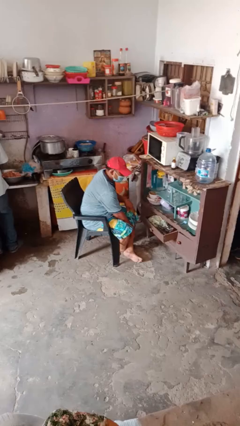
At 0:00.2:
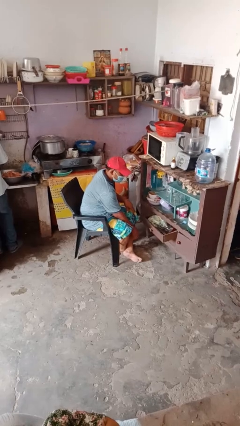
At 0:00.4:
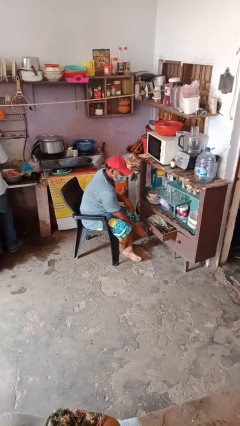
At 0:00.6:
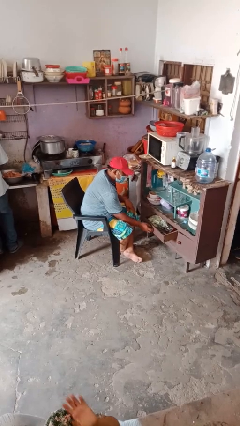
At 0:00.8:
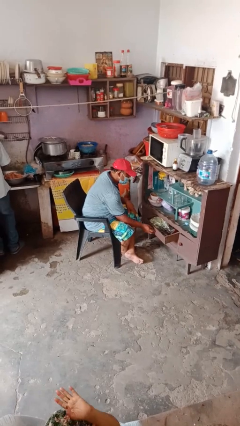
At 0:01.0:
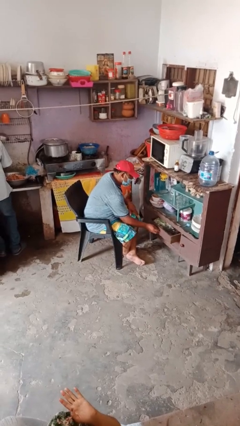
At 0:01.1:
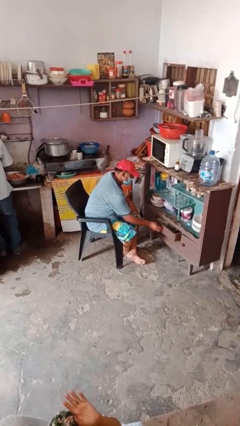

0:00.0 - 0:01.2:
person closes dresser drawer

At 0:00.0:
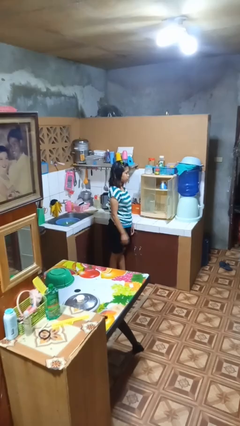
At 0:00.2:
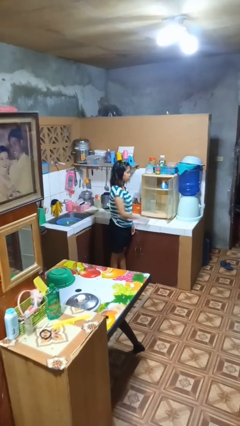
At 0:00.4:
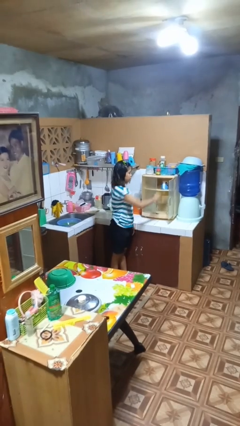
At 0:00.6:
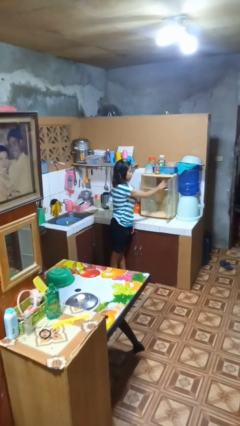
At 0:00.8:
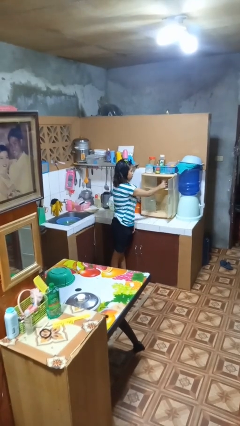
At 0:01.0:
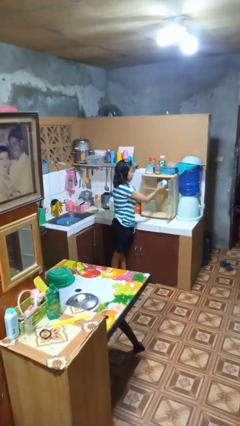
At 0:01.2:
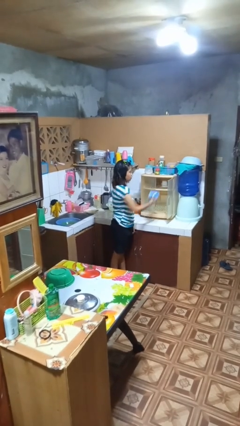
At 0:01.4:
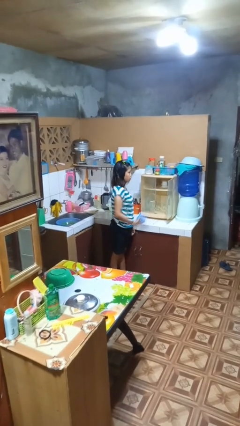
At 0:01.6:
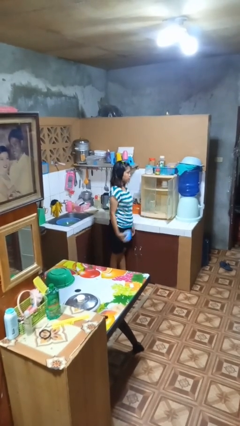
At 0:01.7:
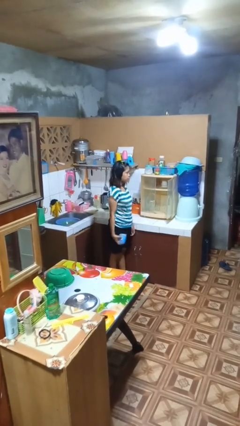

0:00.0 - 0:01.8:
person takes object from cabinet

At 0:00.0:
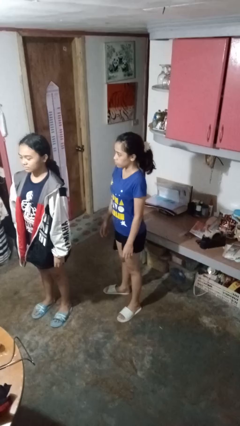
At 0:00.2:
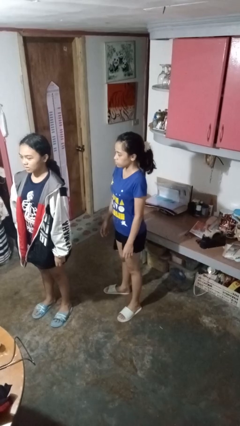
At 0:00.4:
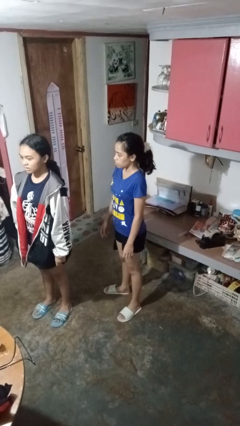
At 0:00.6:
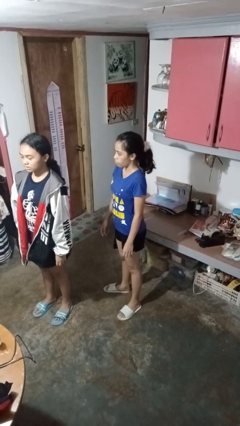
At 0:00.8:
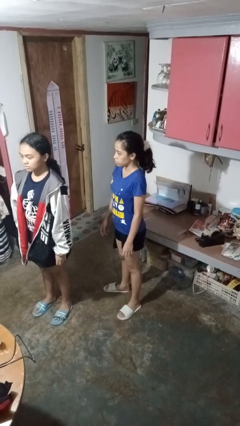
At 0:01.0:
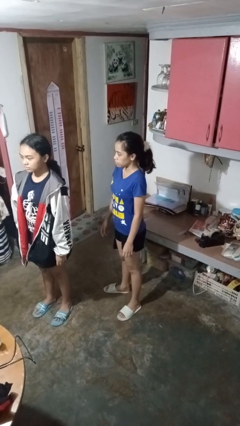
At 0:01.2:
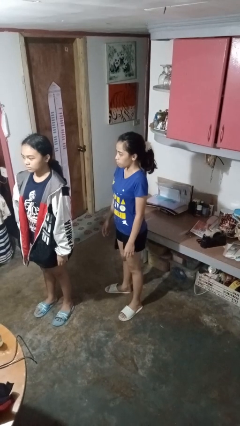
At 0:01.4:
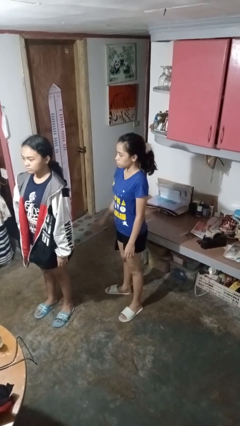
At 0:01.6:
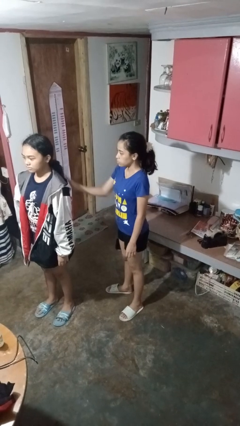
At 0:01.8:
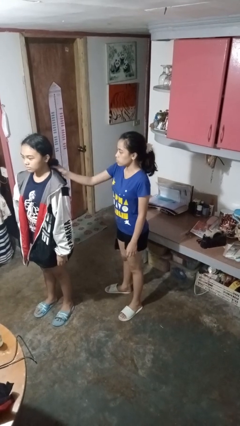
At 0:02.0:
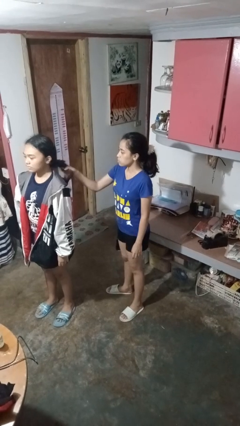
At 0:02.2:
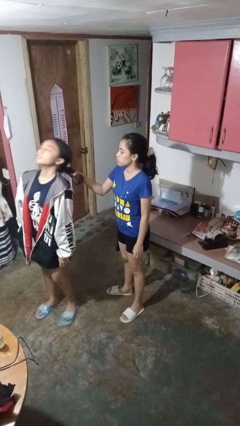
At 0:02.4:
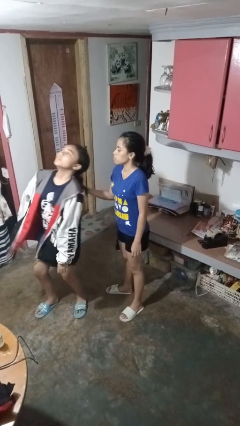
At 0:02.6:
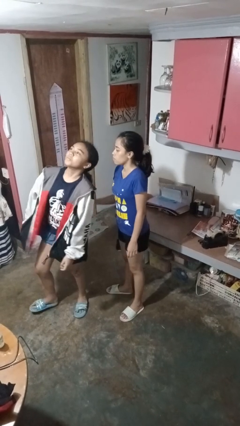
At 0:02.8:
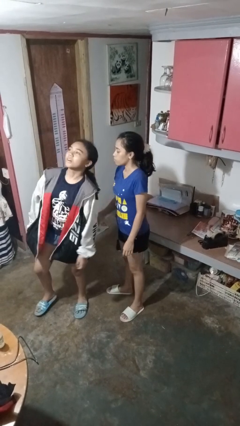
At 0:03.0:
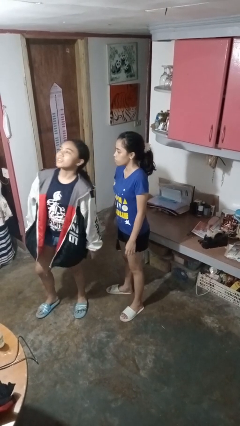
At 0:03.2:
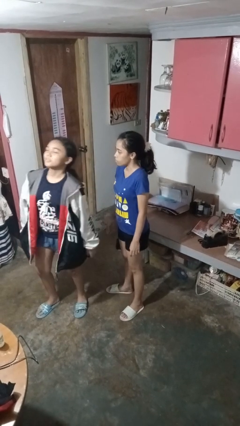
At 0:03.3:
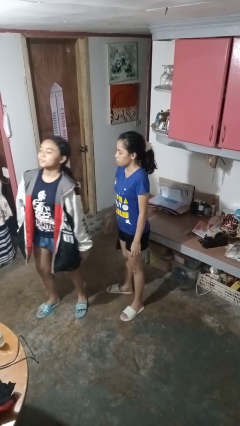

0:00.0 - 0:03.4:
person grabs person by hair

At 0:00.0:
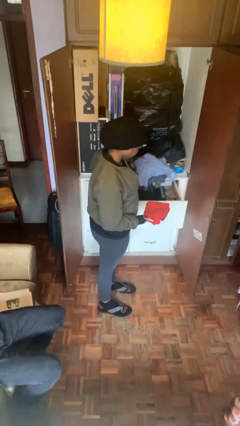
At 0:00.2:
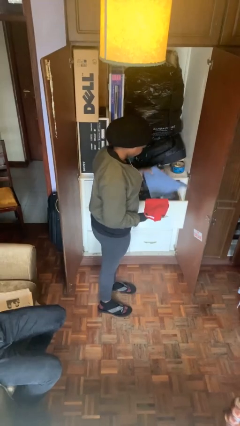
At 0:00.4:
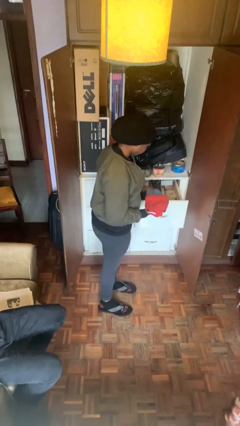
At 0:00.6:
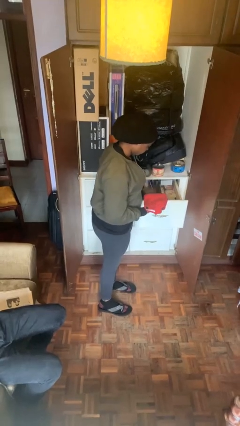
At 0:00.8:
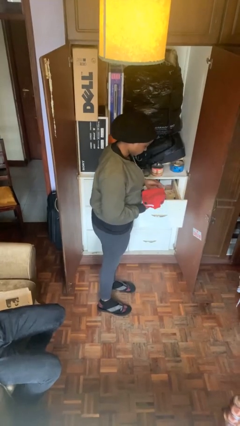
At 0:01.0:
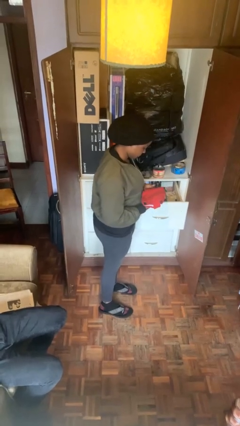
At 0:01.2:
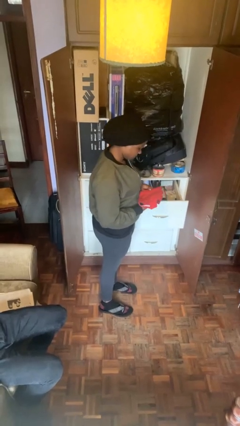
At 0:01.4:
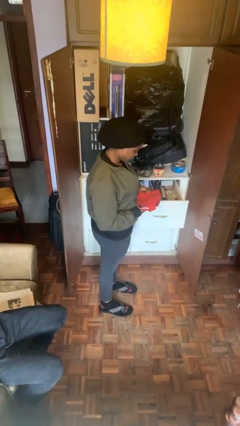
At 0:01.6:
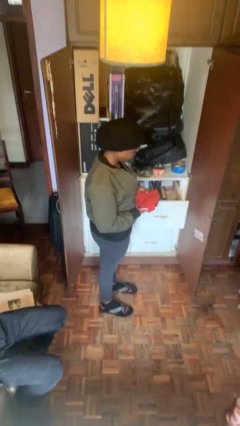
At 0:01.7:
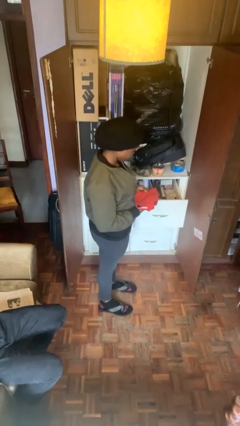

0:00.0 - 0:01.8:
person puts clothes into dresser

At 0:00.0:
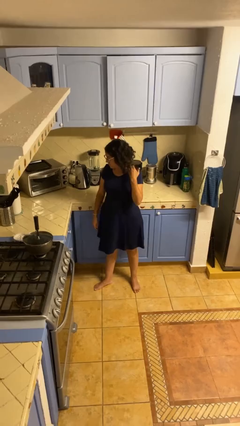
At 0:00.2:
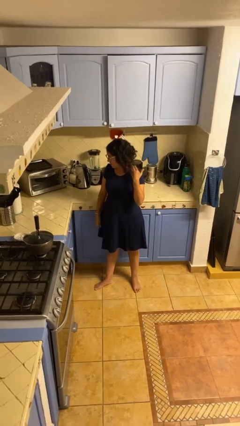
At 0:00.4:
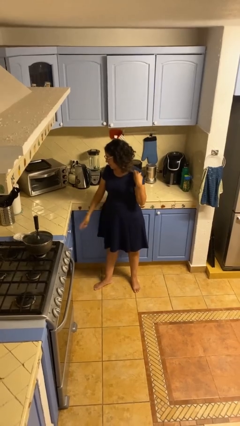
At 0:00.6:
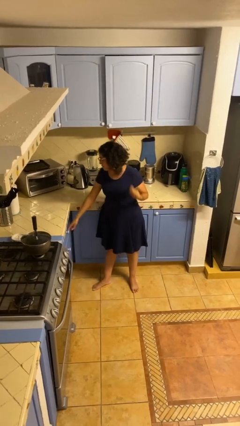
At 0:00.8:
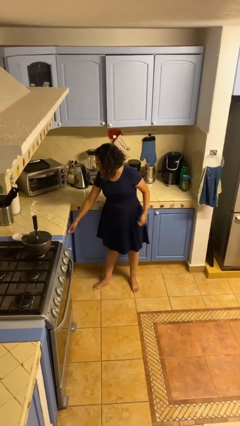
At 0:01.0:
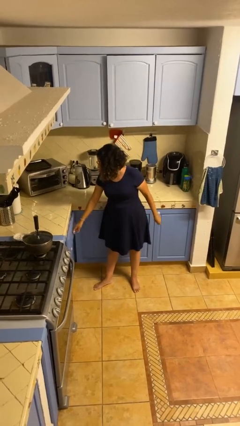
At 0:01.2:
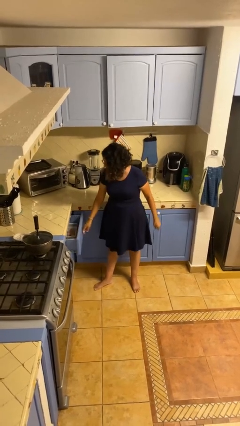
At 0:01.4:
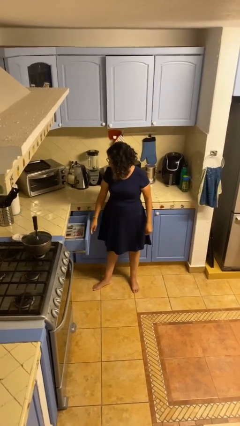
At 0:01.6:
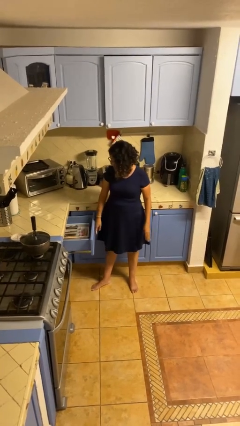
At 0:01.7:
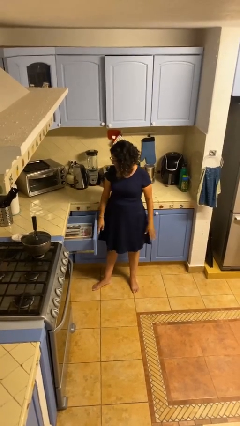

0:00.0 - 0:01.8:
person opens kitchen drawer

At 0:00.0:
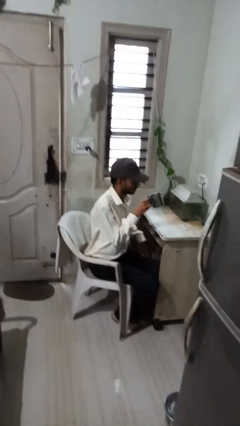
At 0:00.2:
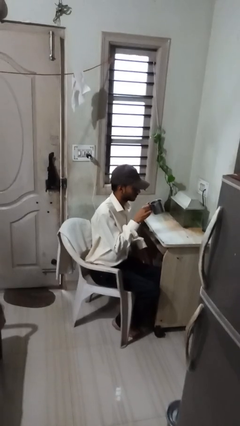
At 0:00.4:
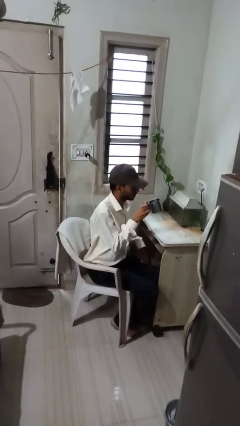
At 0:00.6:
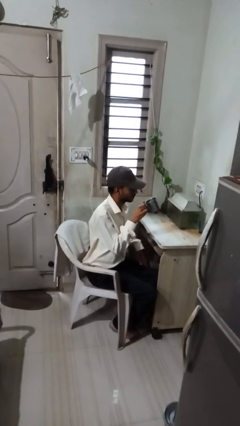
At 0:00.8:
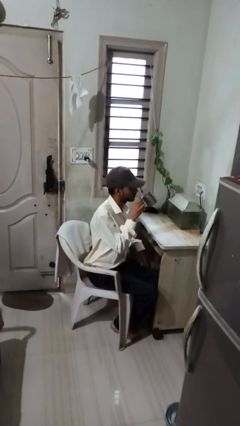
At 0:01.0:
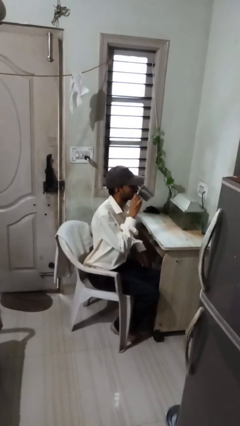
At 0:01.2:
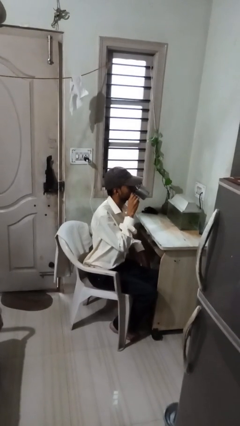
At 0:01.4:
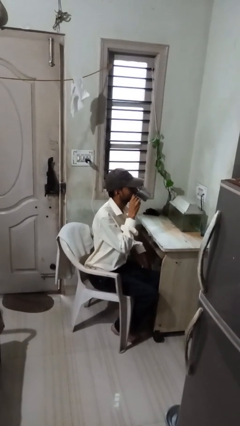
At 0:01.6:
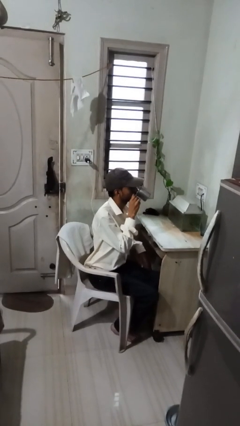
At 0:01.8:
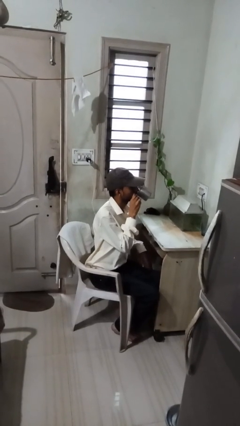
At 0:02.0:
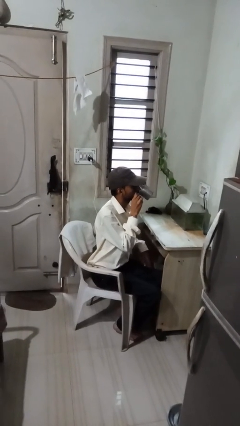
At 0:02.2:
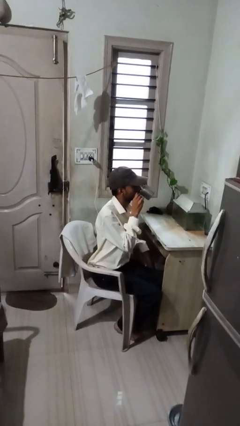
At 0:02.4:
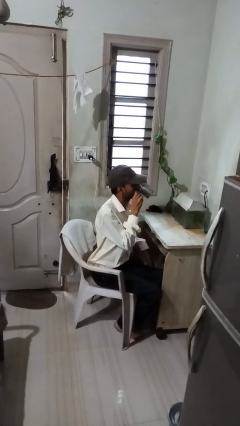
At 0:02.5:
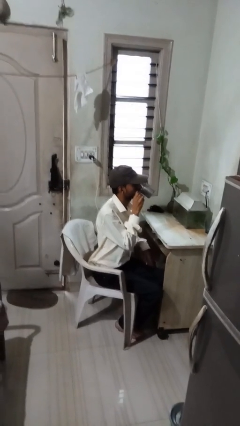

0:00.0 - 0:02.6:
person drinks from mug

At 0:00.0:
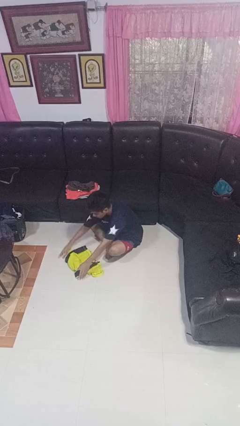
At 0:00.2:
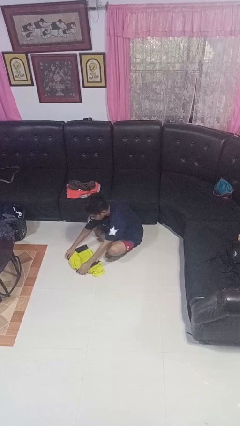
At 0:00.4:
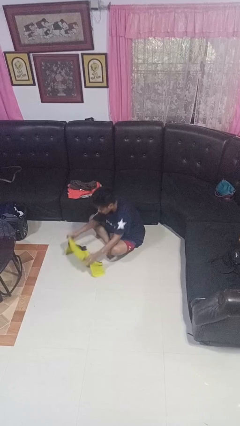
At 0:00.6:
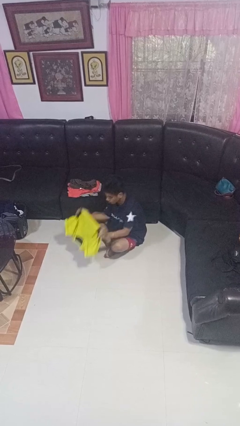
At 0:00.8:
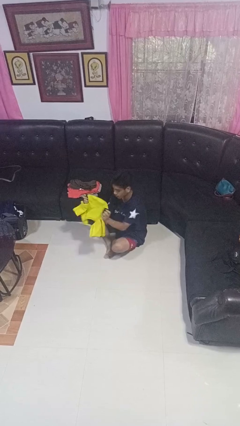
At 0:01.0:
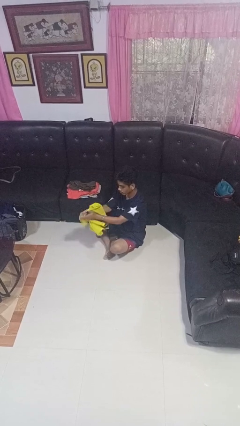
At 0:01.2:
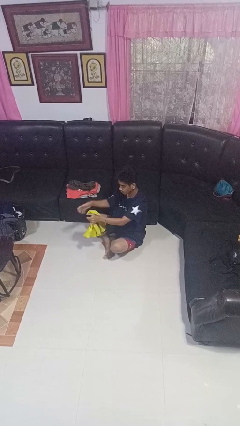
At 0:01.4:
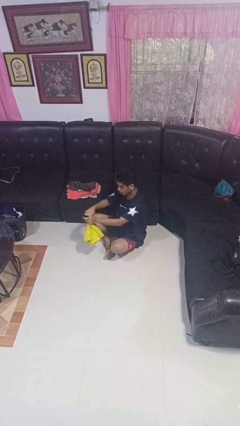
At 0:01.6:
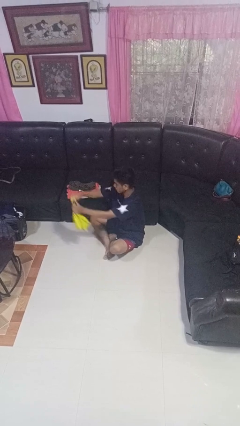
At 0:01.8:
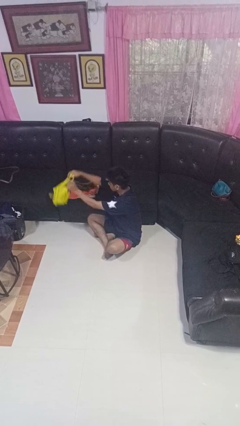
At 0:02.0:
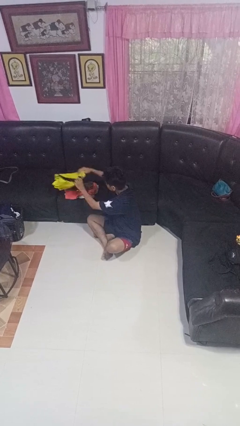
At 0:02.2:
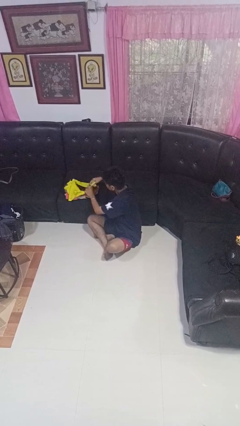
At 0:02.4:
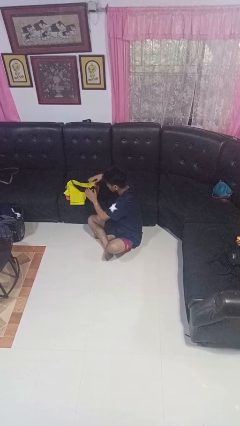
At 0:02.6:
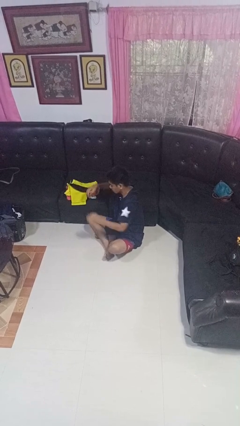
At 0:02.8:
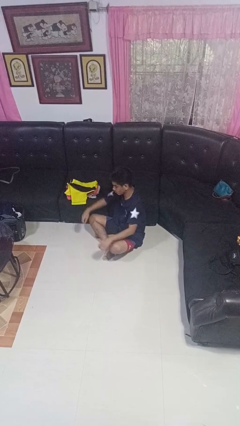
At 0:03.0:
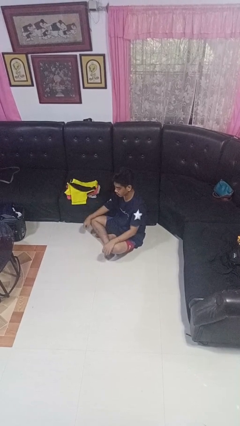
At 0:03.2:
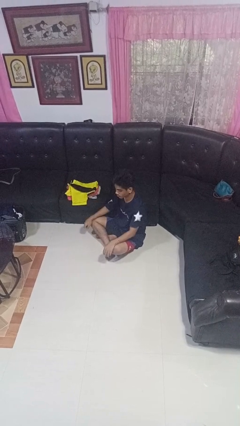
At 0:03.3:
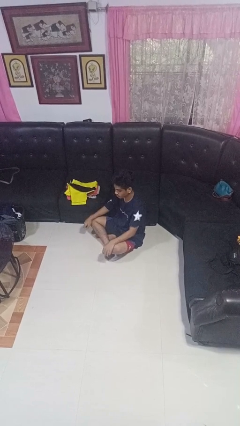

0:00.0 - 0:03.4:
person folds shirt

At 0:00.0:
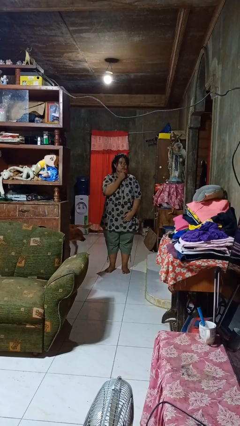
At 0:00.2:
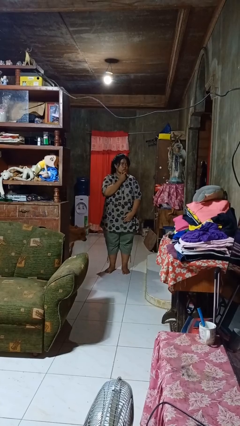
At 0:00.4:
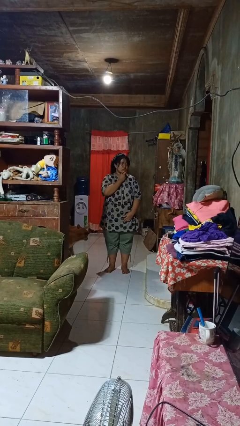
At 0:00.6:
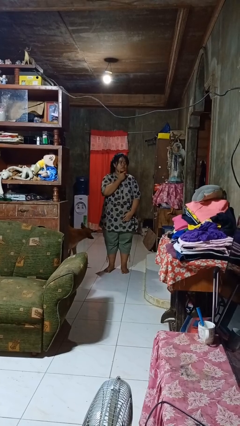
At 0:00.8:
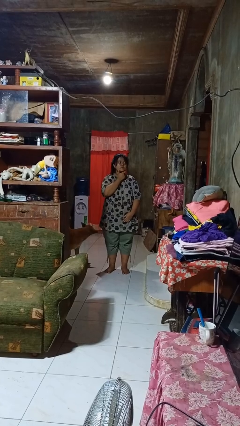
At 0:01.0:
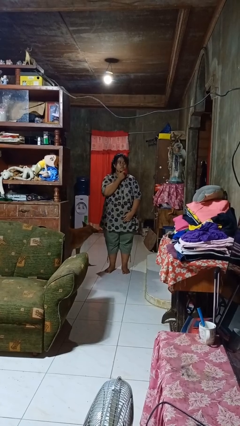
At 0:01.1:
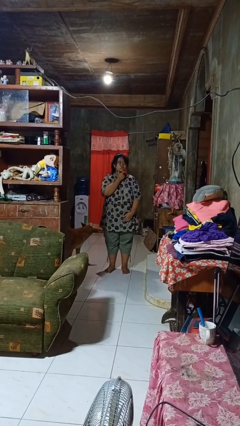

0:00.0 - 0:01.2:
person strokes chin
